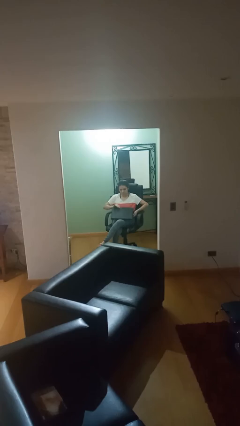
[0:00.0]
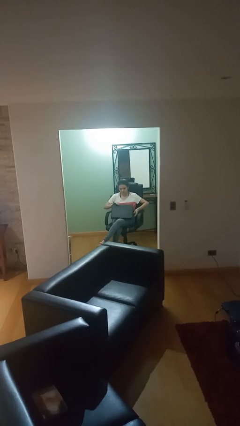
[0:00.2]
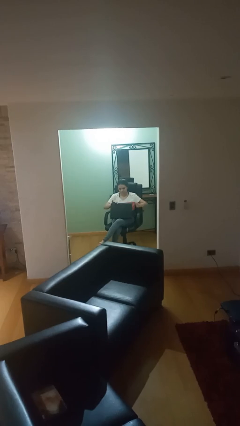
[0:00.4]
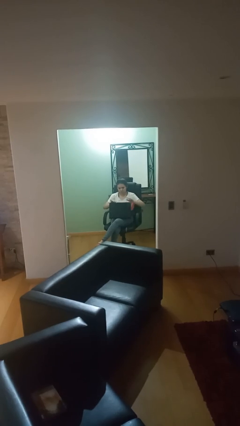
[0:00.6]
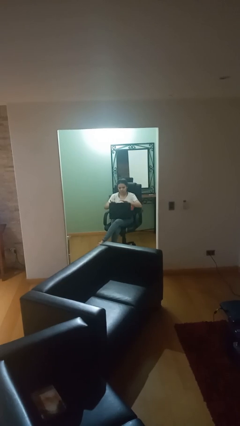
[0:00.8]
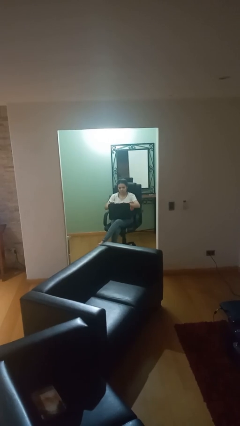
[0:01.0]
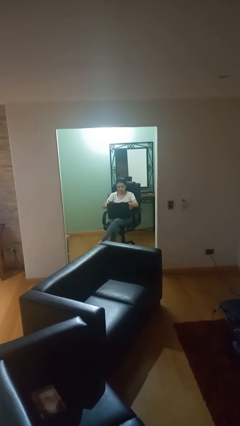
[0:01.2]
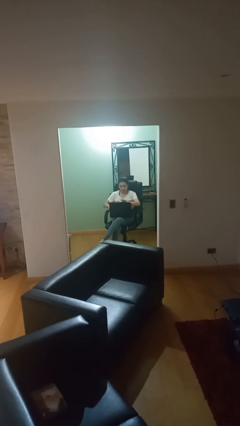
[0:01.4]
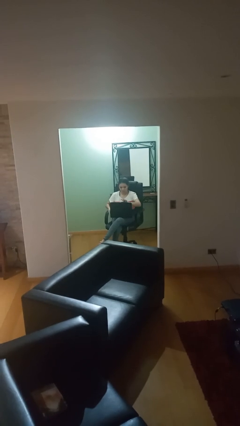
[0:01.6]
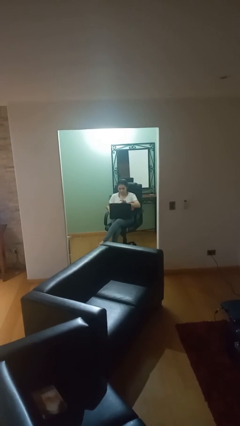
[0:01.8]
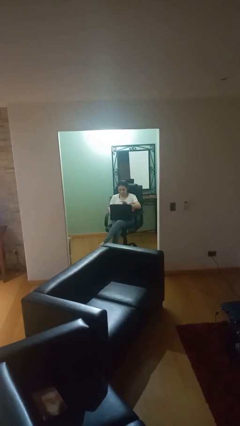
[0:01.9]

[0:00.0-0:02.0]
person interacts with laptop

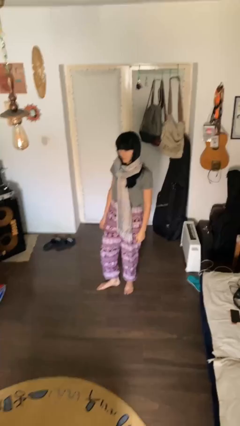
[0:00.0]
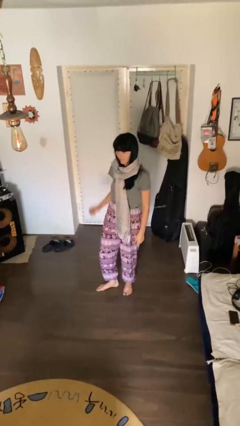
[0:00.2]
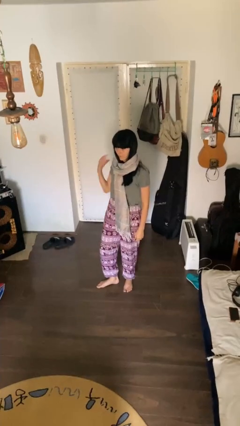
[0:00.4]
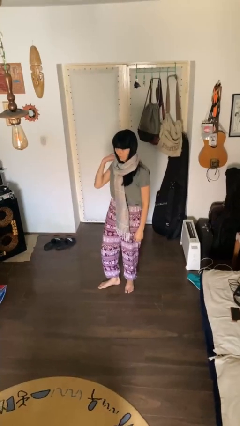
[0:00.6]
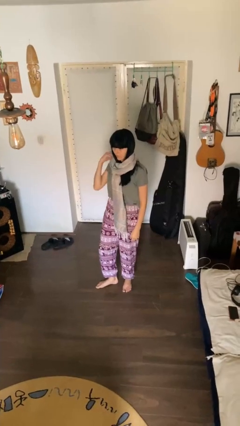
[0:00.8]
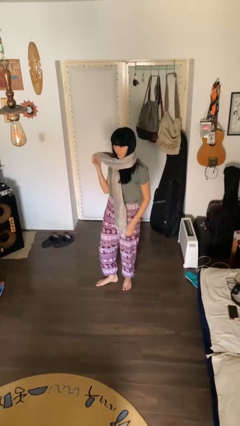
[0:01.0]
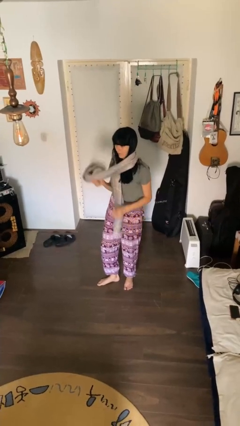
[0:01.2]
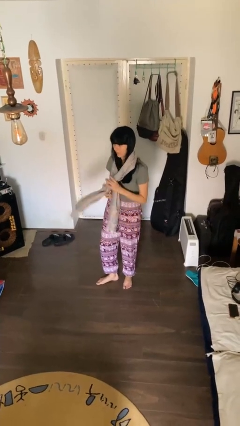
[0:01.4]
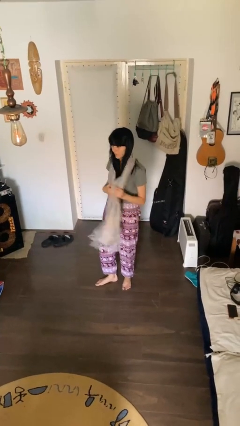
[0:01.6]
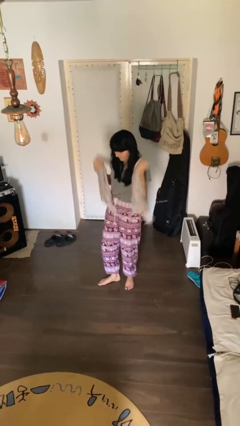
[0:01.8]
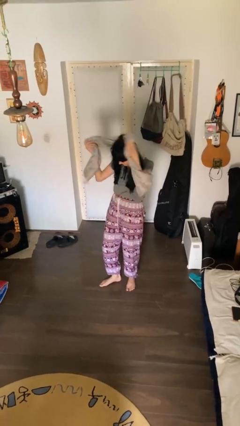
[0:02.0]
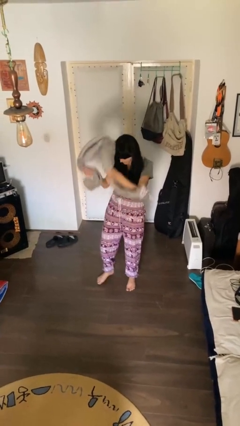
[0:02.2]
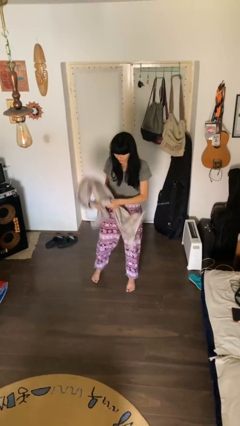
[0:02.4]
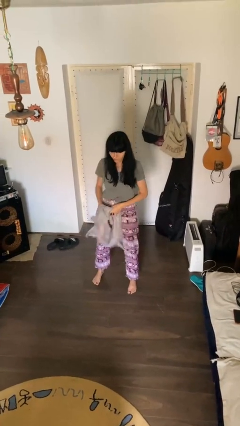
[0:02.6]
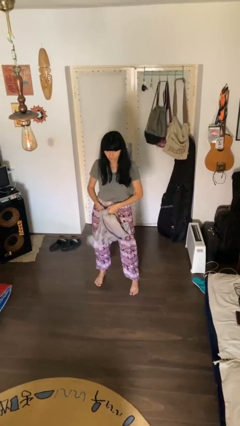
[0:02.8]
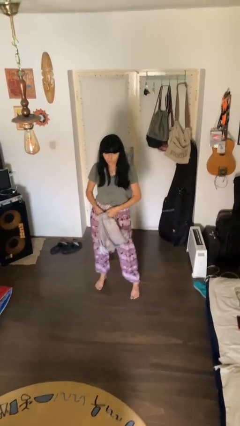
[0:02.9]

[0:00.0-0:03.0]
person takes off scarf

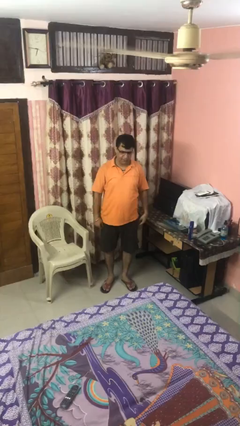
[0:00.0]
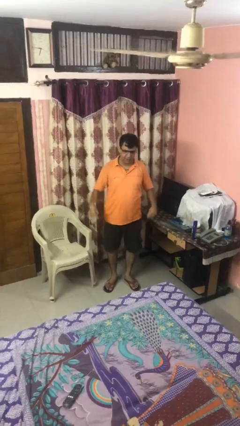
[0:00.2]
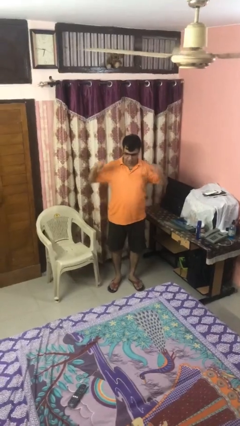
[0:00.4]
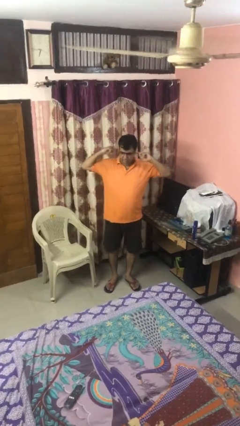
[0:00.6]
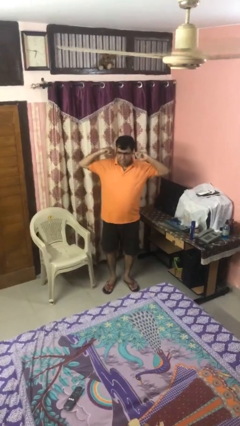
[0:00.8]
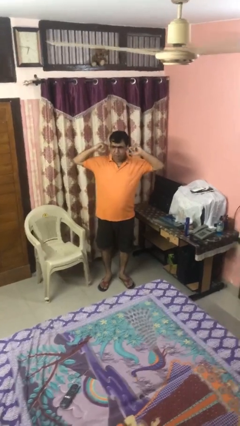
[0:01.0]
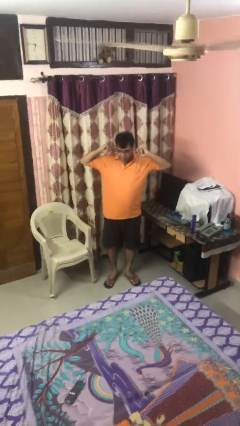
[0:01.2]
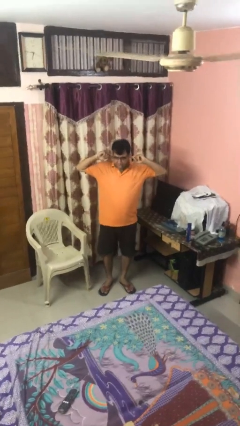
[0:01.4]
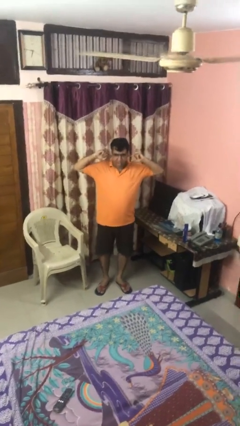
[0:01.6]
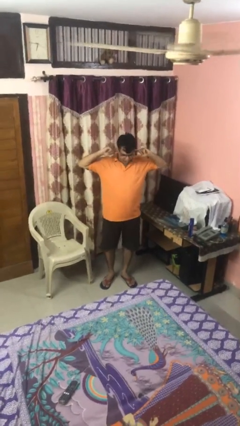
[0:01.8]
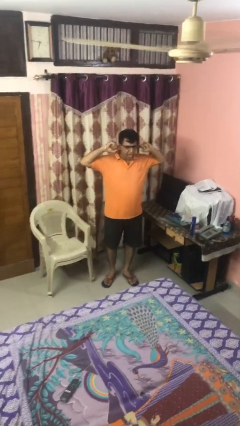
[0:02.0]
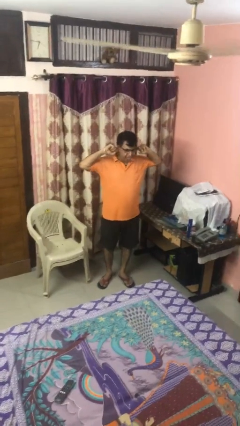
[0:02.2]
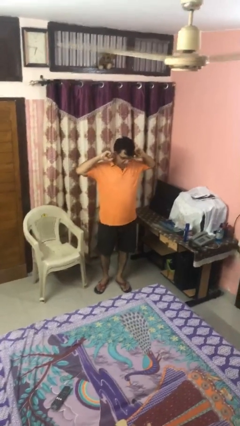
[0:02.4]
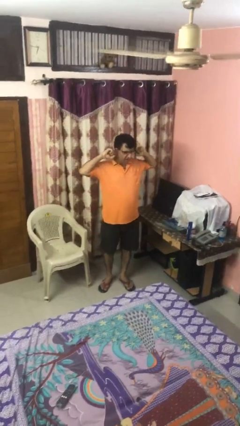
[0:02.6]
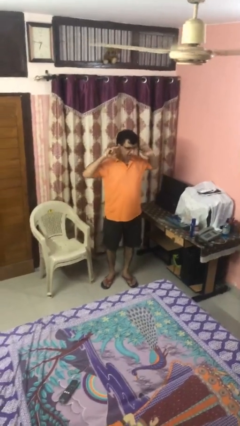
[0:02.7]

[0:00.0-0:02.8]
person puts fingers in ear

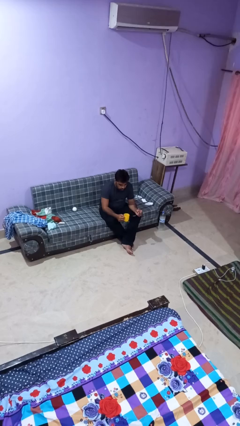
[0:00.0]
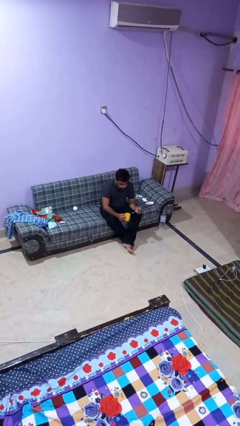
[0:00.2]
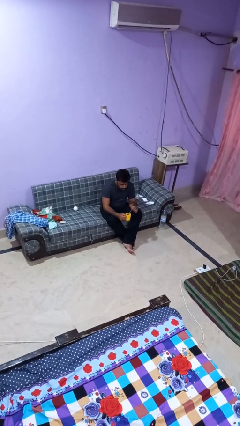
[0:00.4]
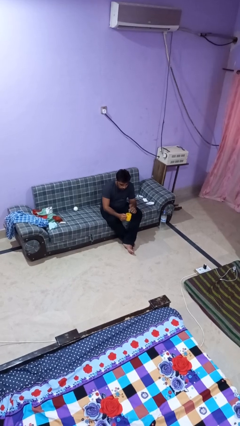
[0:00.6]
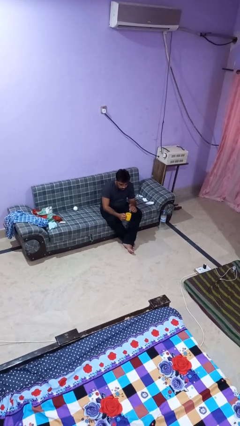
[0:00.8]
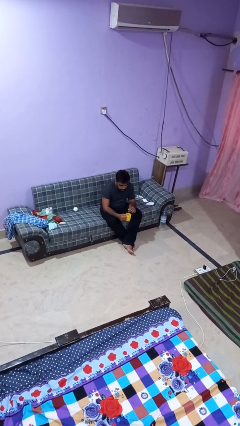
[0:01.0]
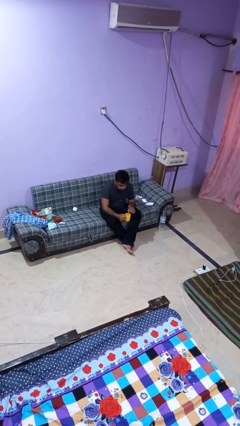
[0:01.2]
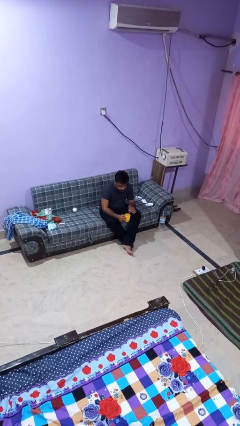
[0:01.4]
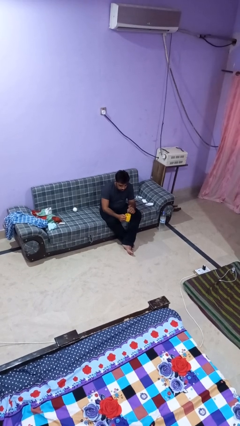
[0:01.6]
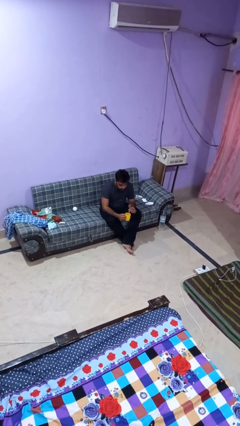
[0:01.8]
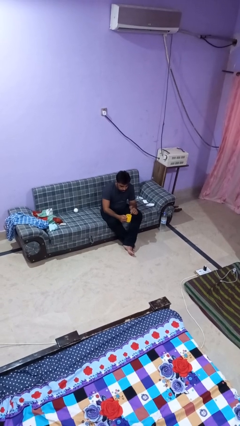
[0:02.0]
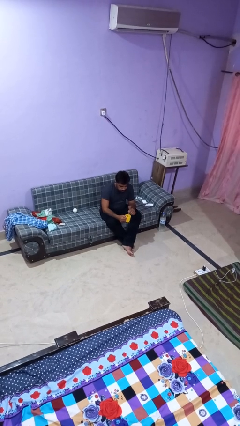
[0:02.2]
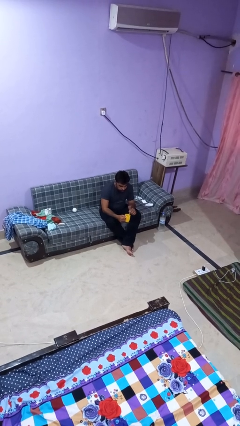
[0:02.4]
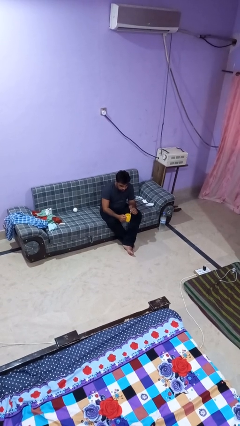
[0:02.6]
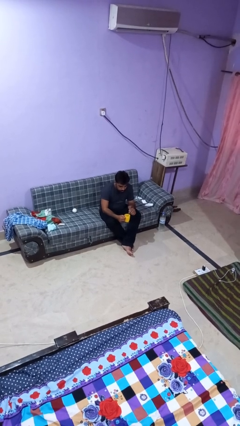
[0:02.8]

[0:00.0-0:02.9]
person stirs mug

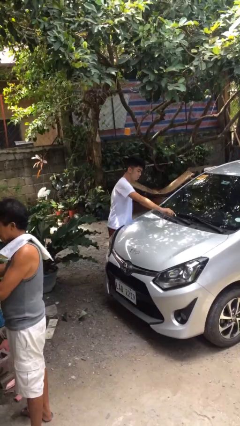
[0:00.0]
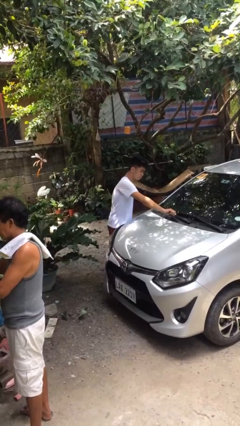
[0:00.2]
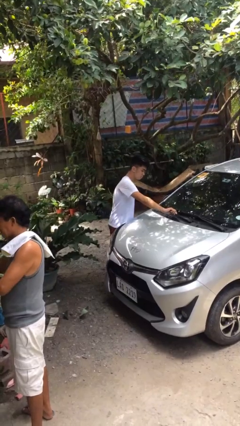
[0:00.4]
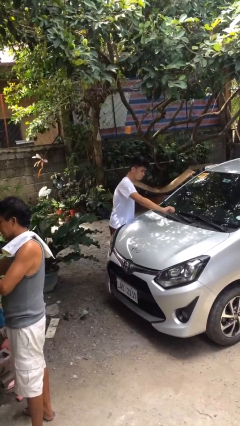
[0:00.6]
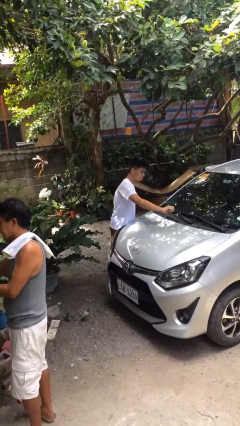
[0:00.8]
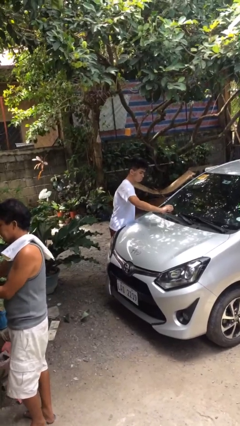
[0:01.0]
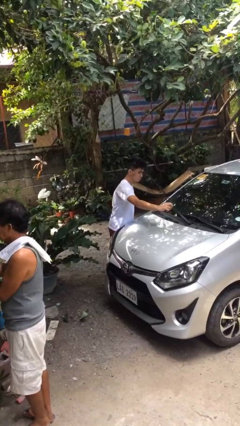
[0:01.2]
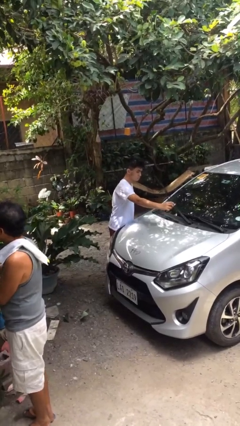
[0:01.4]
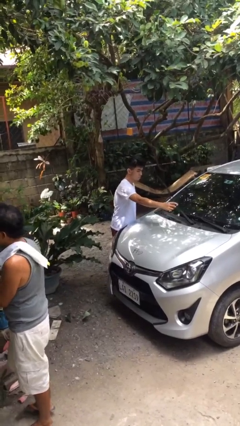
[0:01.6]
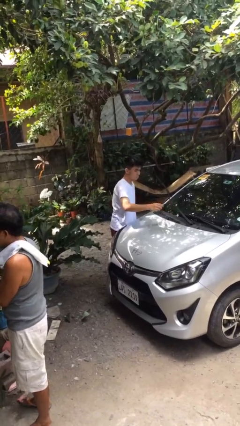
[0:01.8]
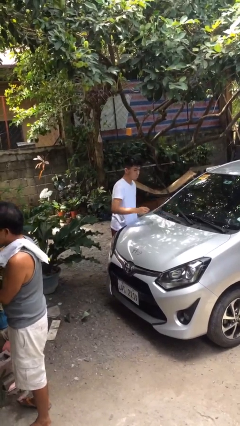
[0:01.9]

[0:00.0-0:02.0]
person flips up car wipers

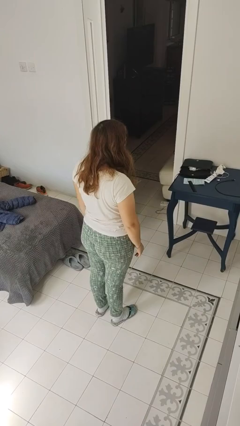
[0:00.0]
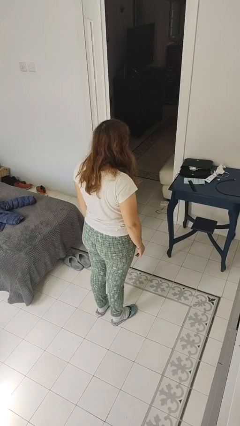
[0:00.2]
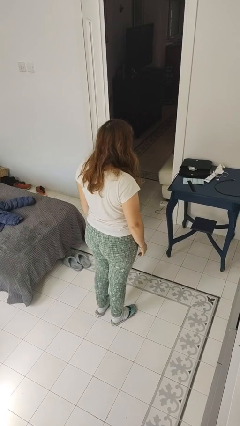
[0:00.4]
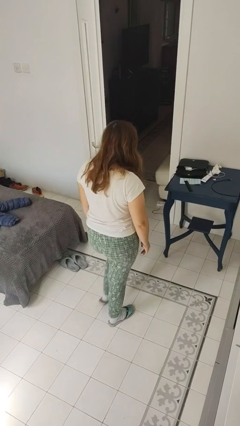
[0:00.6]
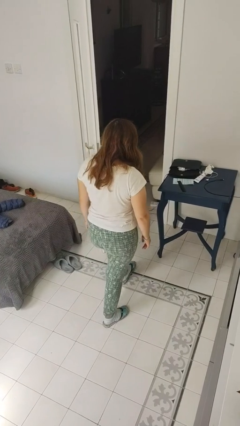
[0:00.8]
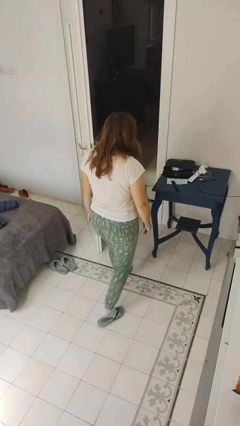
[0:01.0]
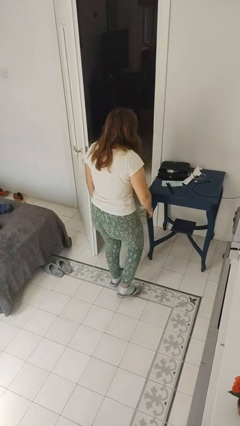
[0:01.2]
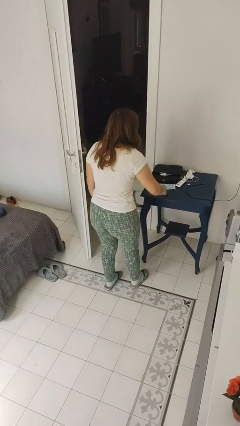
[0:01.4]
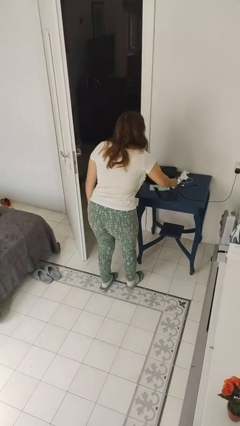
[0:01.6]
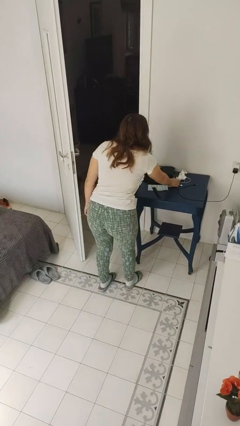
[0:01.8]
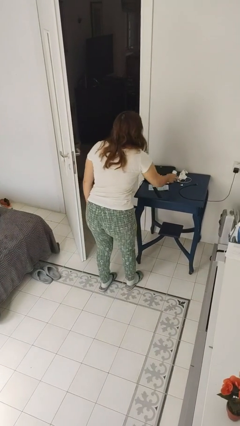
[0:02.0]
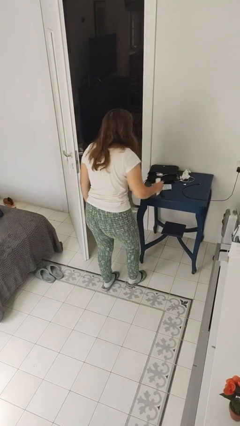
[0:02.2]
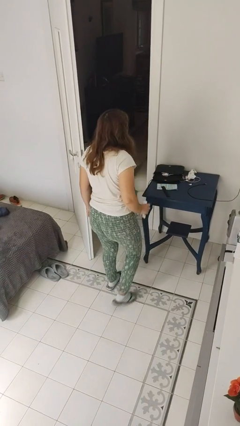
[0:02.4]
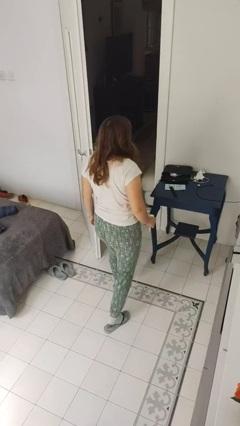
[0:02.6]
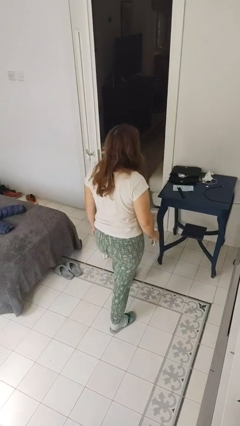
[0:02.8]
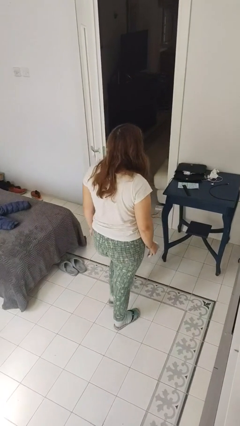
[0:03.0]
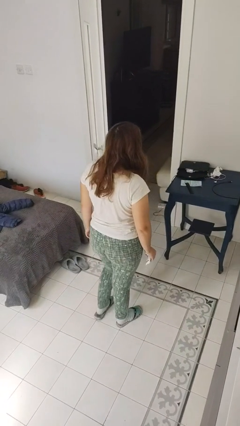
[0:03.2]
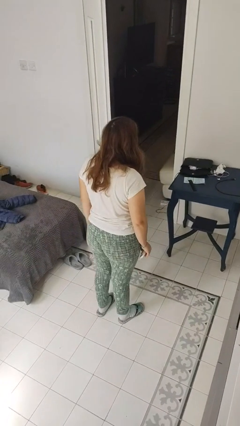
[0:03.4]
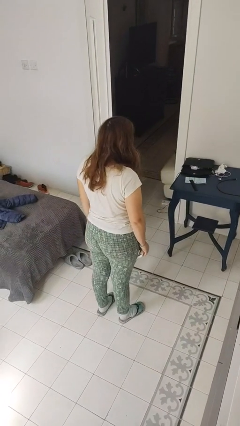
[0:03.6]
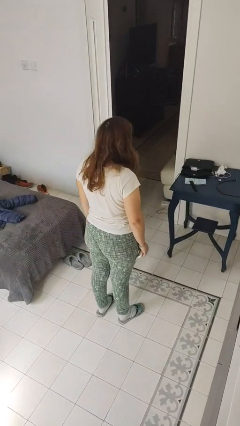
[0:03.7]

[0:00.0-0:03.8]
person picks up object from table

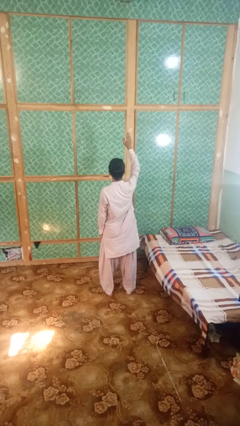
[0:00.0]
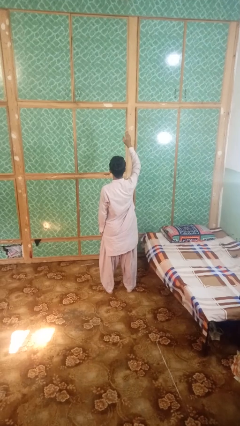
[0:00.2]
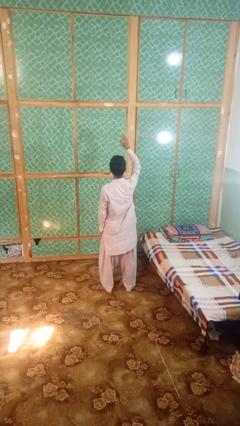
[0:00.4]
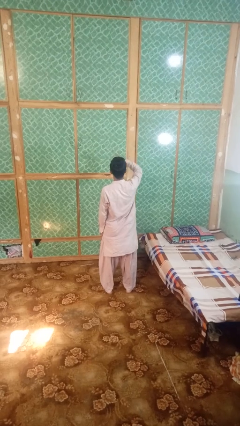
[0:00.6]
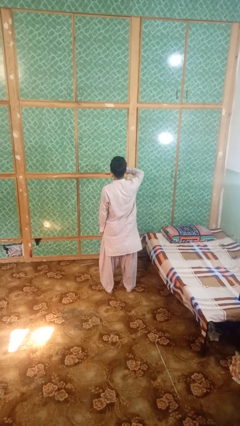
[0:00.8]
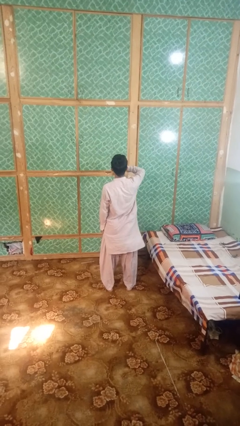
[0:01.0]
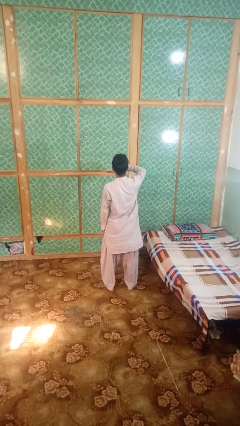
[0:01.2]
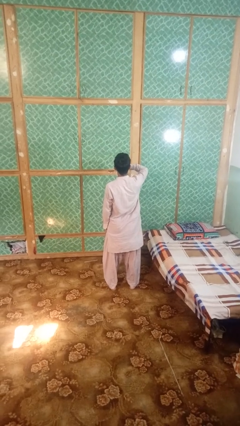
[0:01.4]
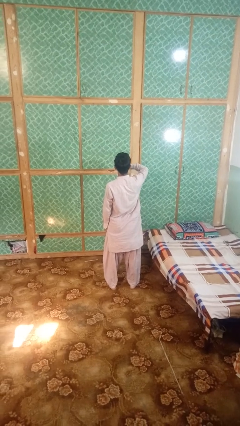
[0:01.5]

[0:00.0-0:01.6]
person gestures swipe down
